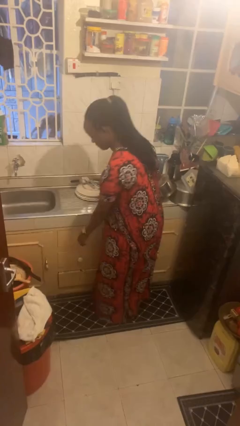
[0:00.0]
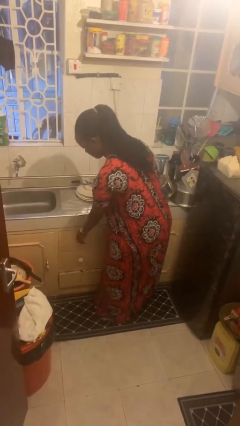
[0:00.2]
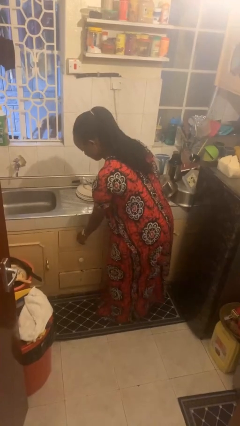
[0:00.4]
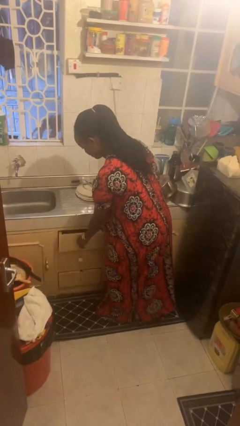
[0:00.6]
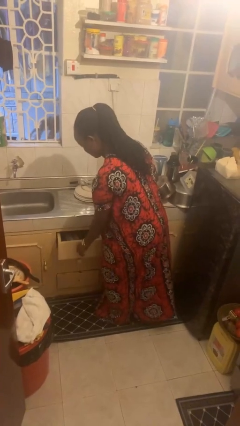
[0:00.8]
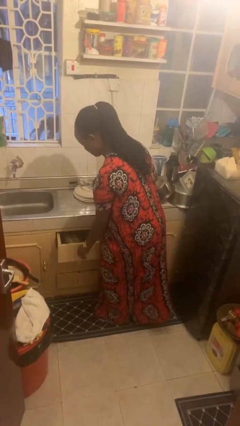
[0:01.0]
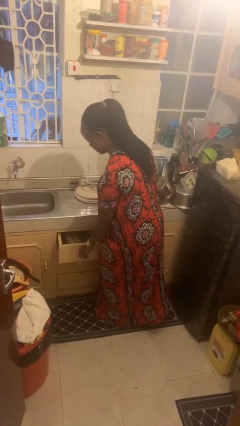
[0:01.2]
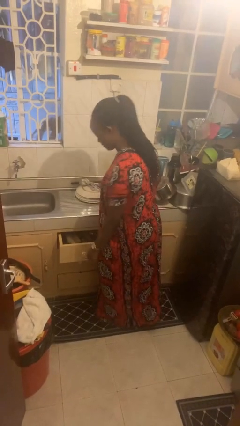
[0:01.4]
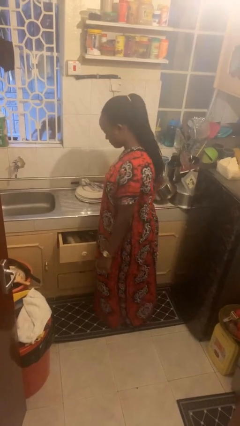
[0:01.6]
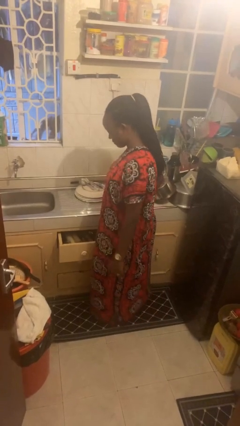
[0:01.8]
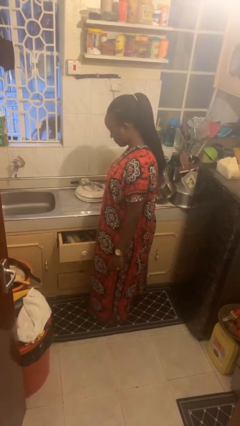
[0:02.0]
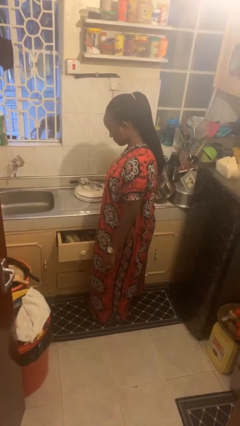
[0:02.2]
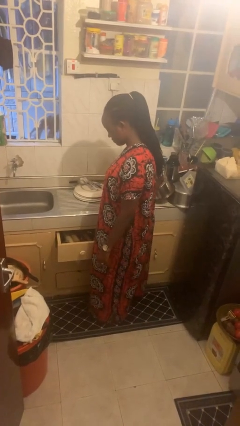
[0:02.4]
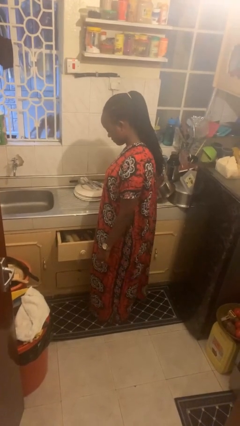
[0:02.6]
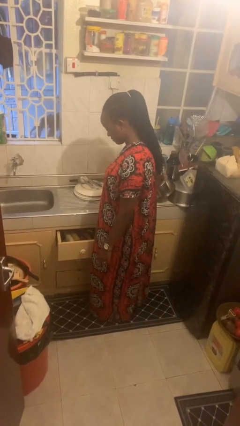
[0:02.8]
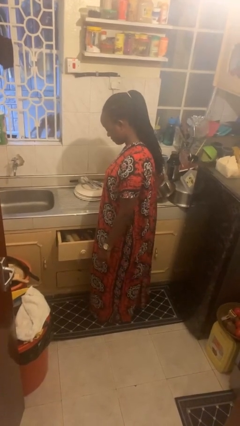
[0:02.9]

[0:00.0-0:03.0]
person opens kitchen drawer

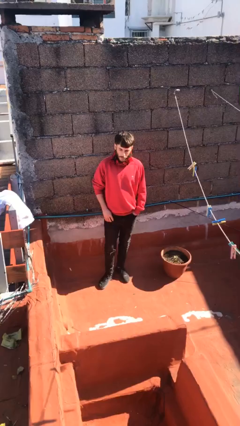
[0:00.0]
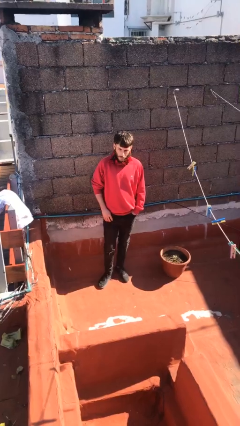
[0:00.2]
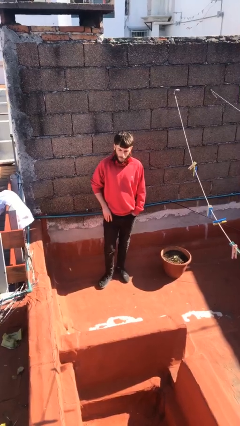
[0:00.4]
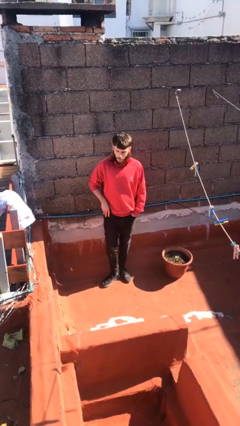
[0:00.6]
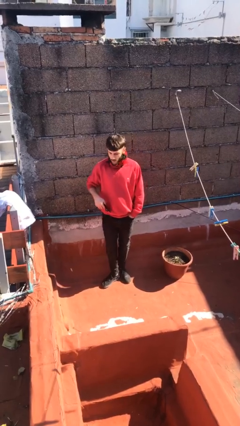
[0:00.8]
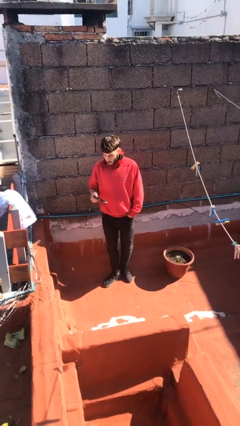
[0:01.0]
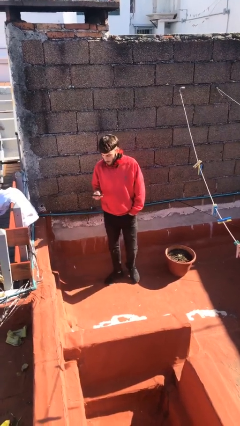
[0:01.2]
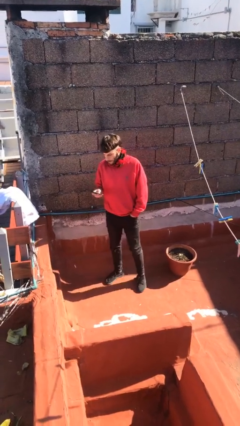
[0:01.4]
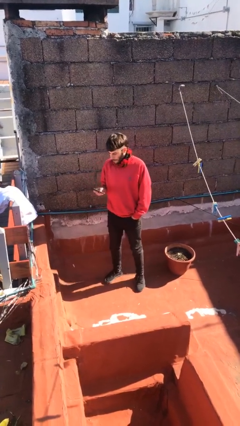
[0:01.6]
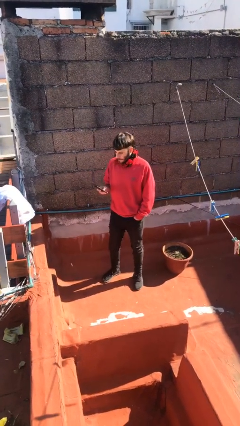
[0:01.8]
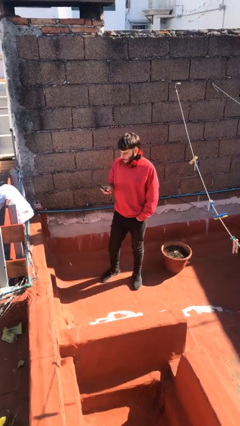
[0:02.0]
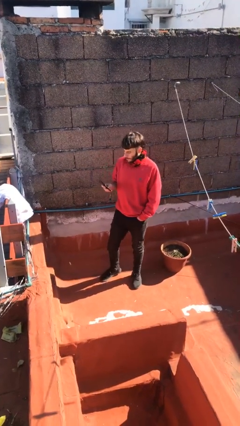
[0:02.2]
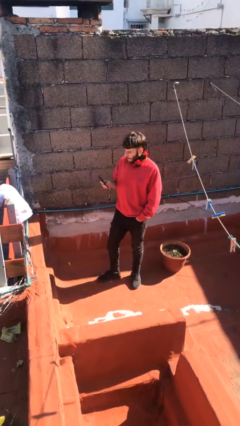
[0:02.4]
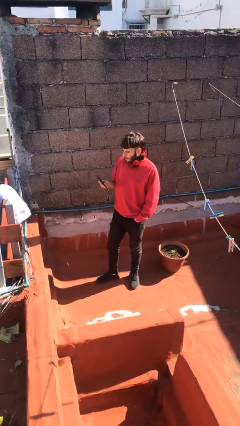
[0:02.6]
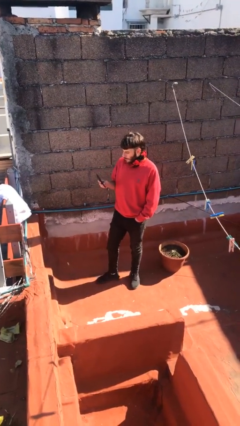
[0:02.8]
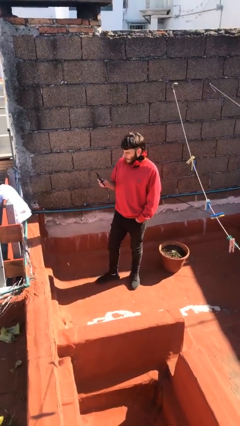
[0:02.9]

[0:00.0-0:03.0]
person takes phone from pocket

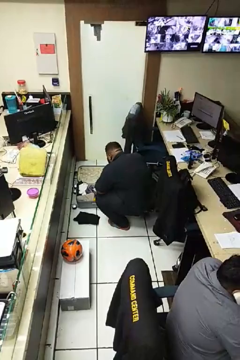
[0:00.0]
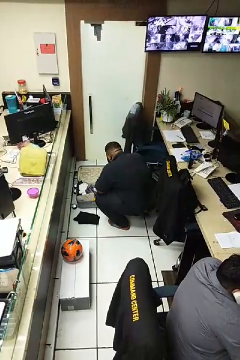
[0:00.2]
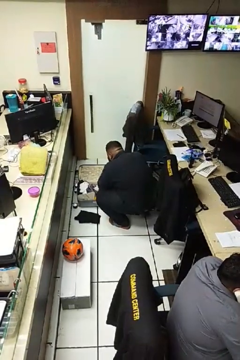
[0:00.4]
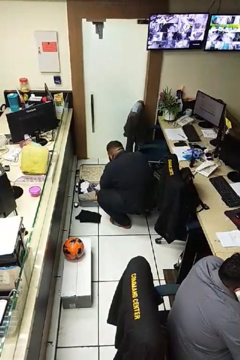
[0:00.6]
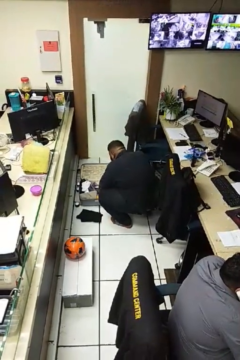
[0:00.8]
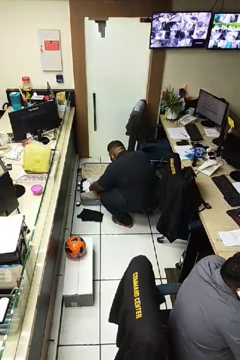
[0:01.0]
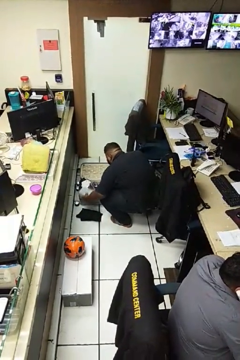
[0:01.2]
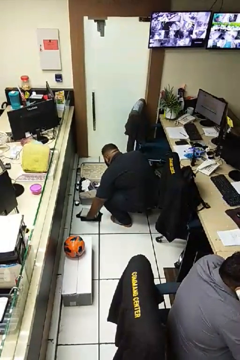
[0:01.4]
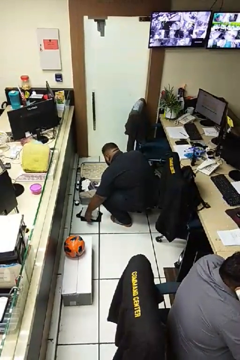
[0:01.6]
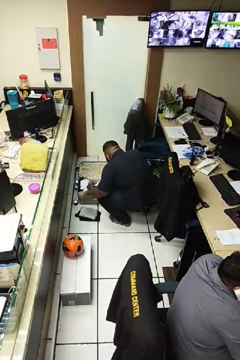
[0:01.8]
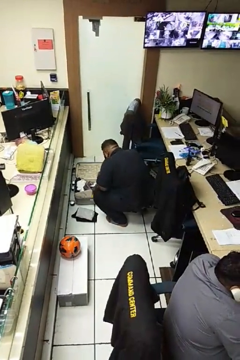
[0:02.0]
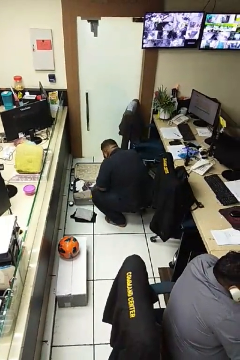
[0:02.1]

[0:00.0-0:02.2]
person unloads clothes from suitcase

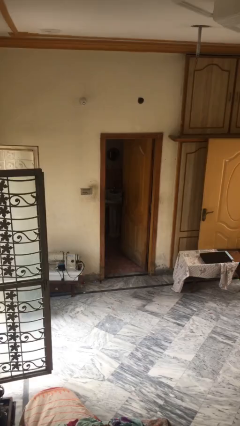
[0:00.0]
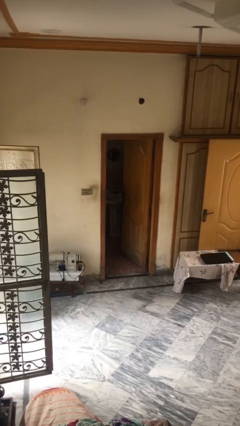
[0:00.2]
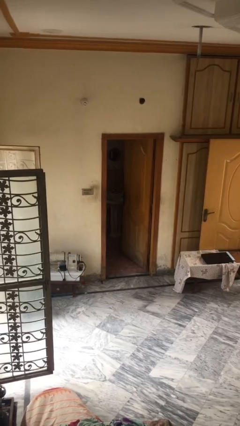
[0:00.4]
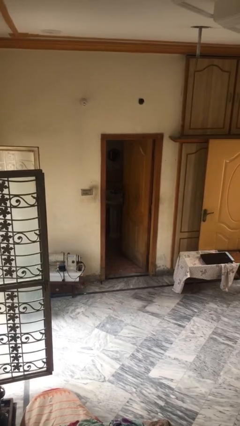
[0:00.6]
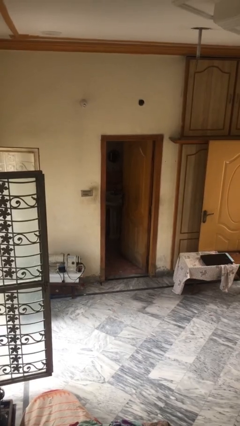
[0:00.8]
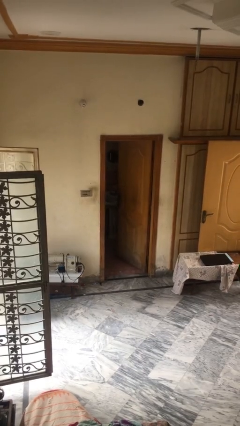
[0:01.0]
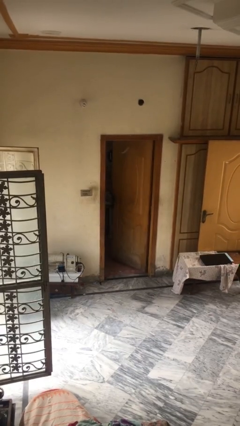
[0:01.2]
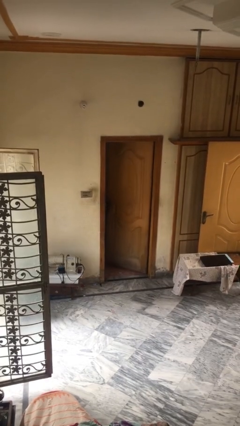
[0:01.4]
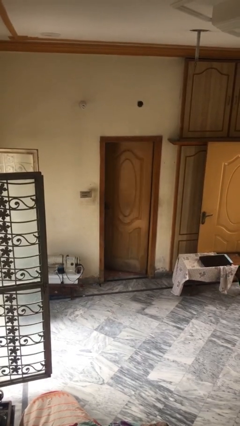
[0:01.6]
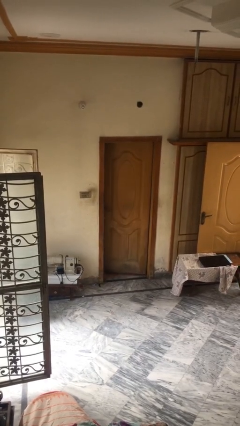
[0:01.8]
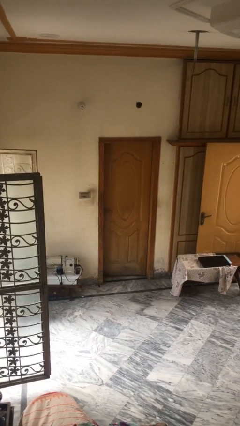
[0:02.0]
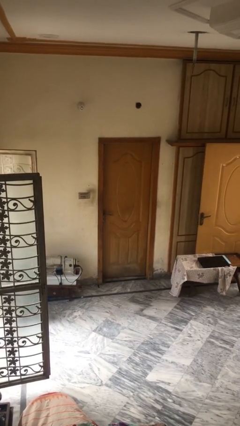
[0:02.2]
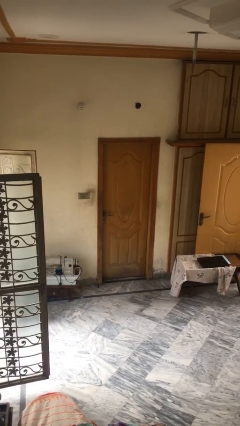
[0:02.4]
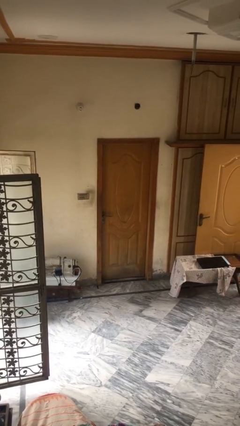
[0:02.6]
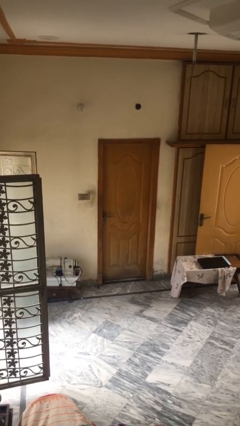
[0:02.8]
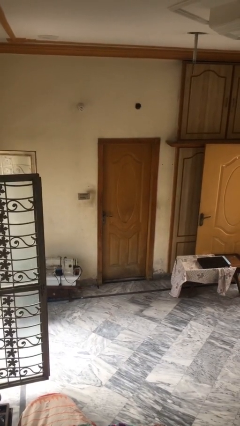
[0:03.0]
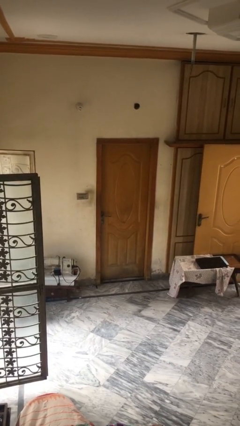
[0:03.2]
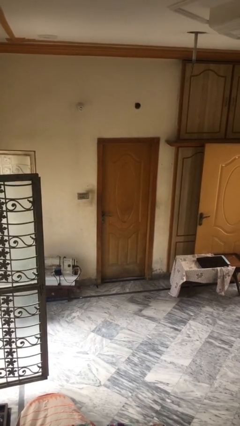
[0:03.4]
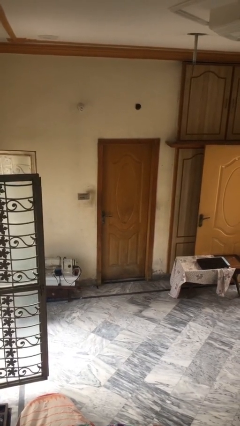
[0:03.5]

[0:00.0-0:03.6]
person closes facility door

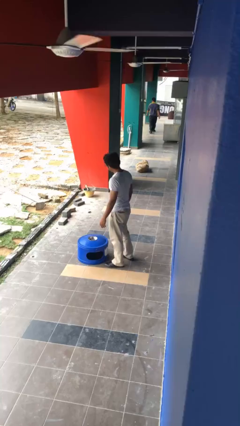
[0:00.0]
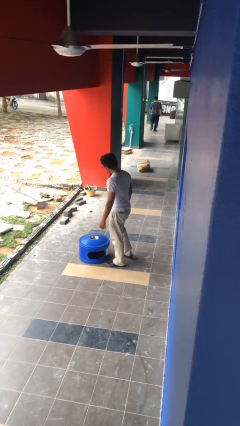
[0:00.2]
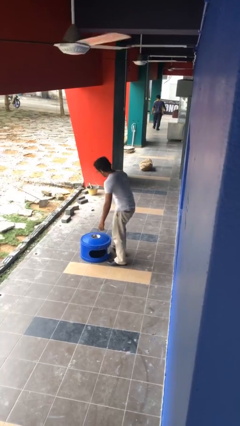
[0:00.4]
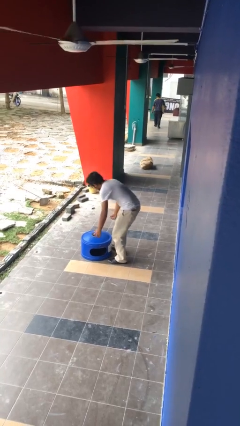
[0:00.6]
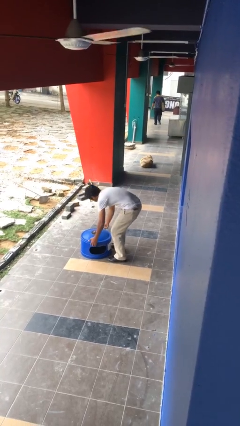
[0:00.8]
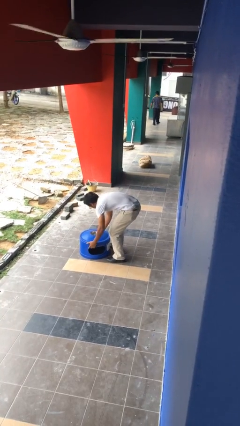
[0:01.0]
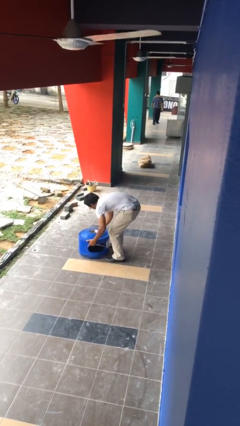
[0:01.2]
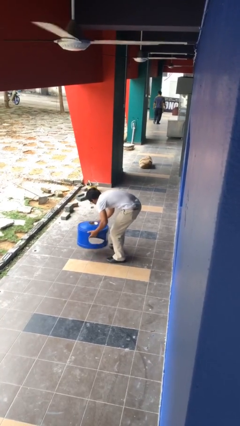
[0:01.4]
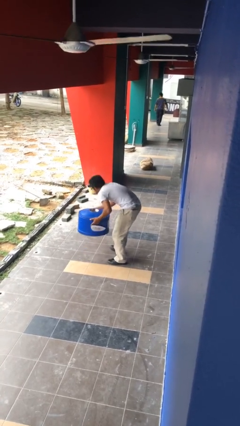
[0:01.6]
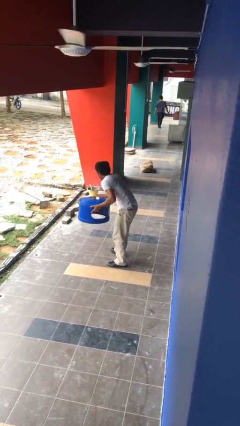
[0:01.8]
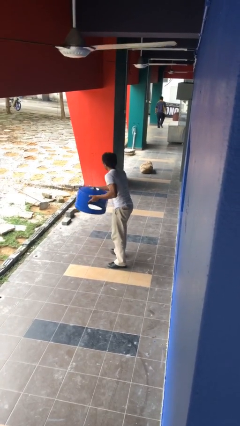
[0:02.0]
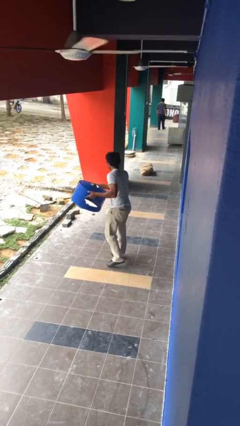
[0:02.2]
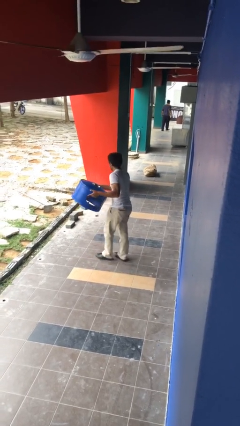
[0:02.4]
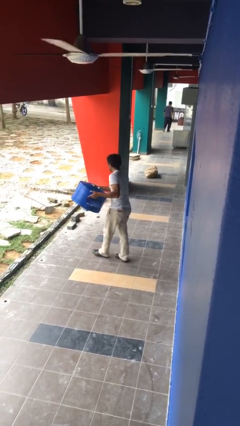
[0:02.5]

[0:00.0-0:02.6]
person picks up object from floor

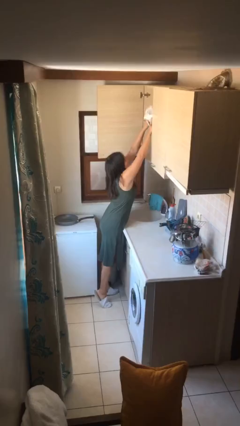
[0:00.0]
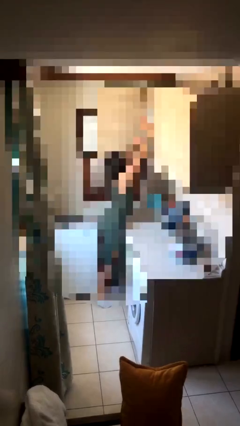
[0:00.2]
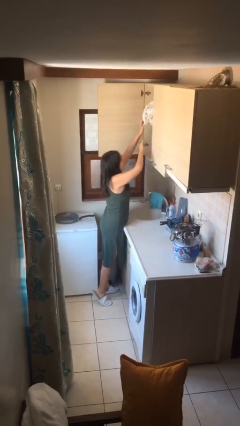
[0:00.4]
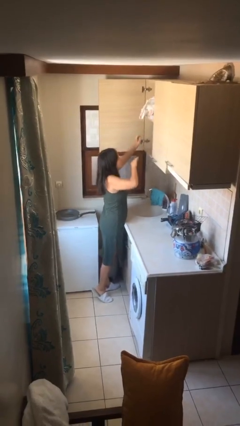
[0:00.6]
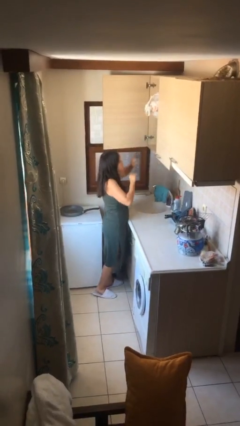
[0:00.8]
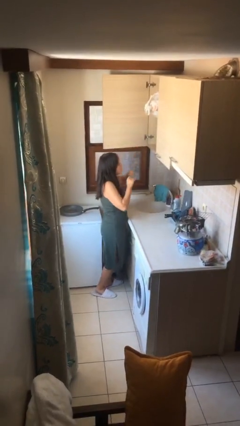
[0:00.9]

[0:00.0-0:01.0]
person puts down object on shelf

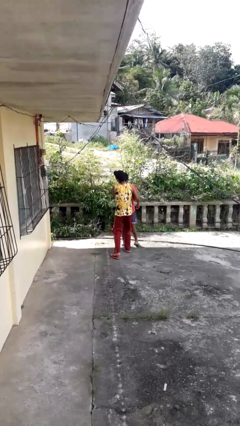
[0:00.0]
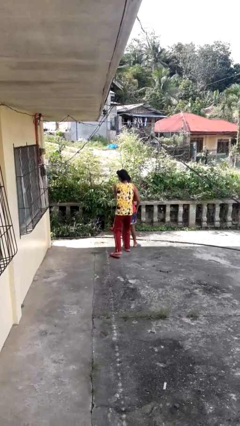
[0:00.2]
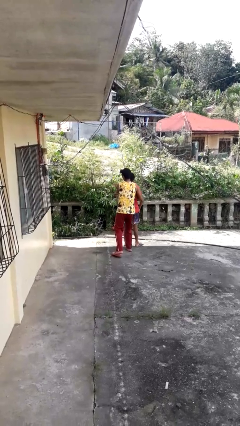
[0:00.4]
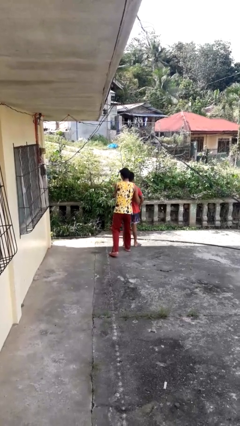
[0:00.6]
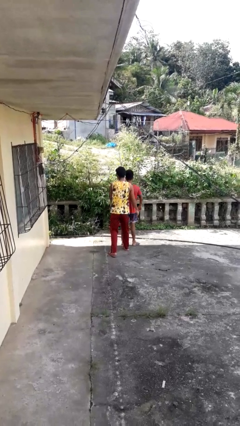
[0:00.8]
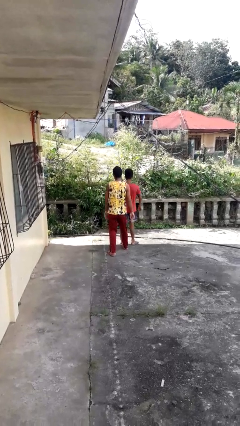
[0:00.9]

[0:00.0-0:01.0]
person puts down person

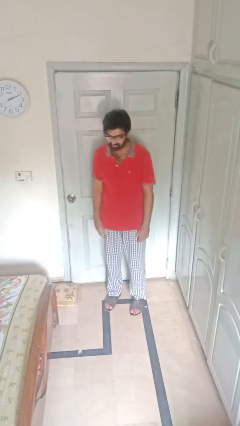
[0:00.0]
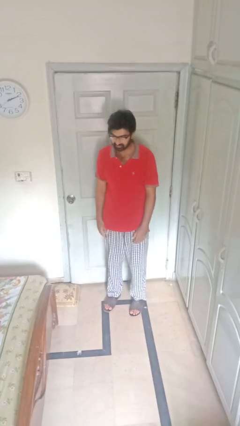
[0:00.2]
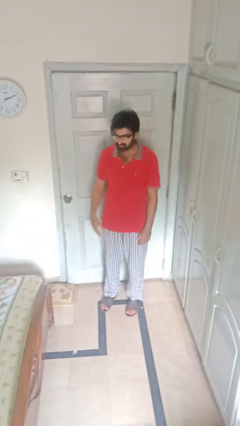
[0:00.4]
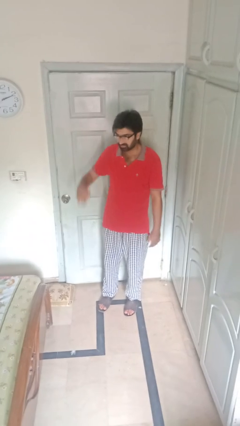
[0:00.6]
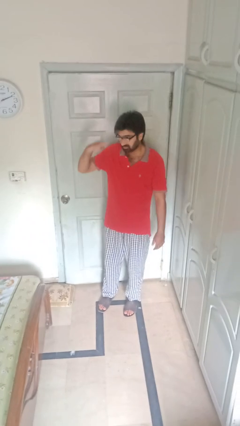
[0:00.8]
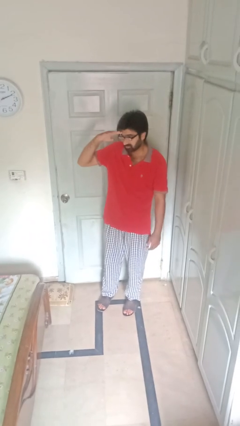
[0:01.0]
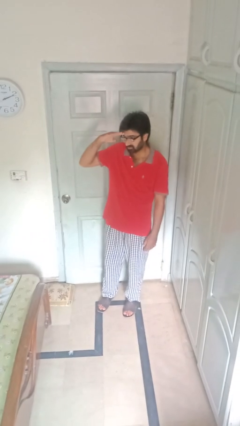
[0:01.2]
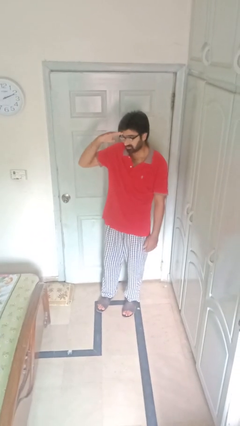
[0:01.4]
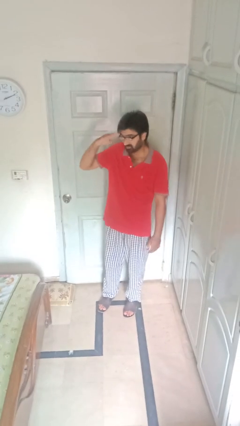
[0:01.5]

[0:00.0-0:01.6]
person salutes
